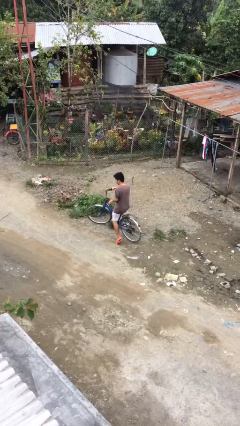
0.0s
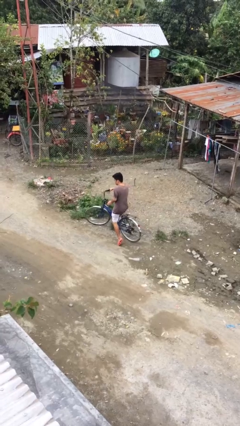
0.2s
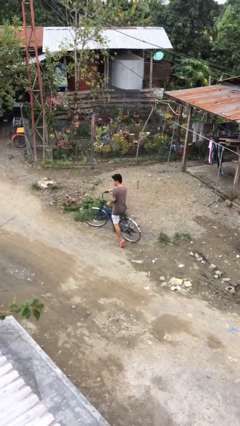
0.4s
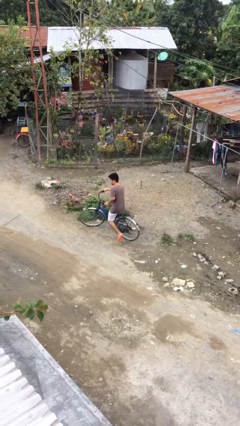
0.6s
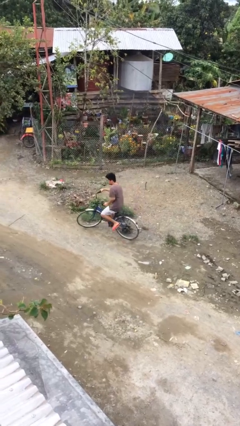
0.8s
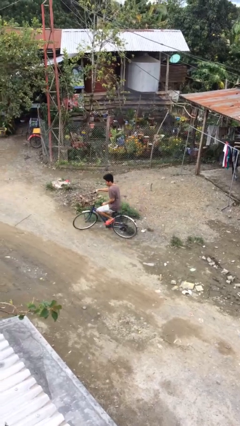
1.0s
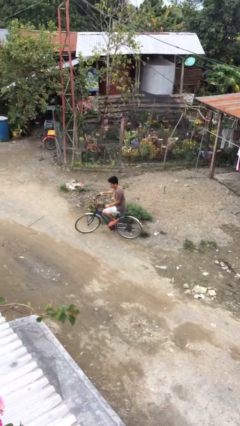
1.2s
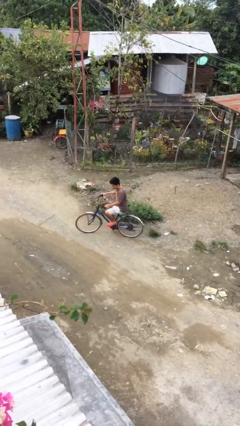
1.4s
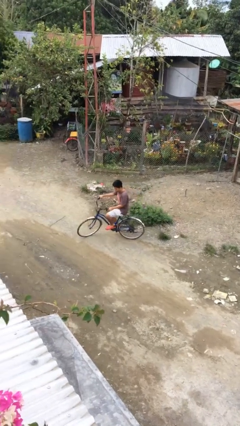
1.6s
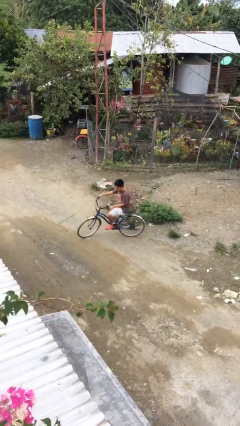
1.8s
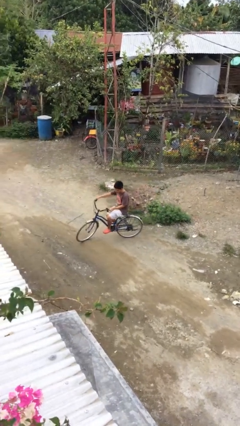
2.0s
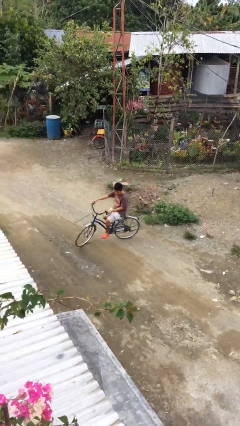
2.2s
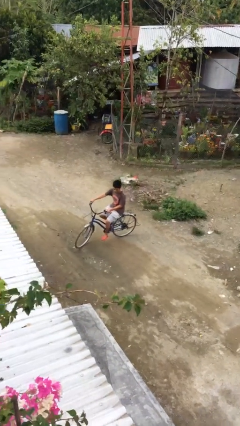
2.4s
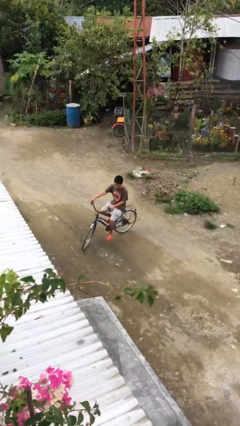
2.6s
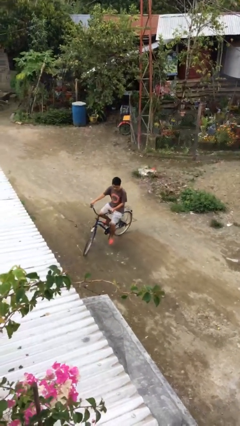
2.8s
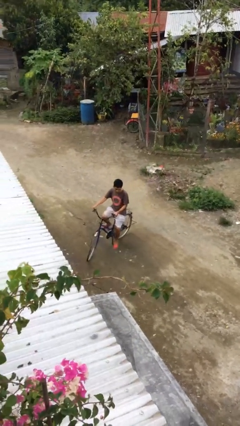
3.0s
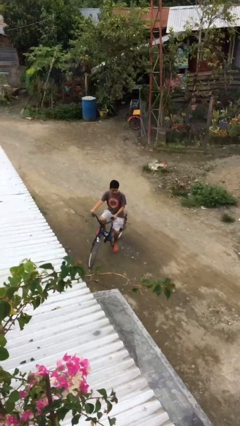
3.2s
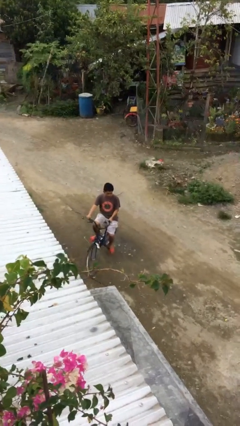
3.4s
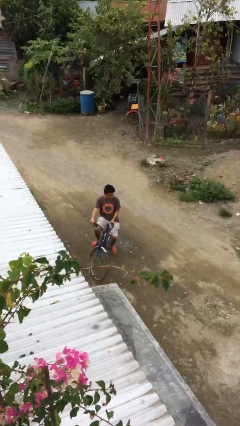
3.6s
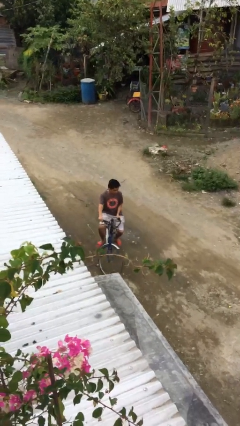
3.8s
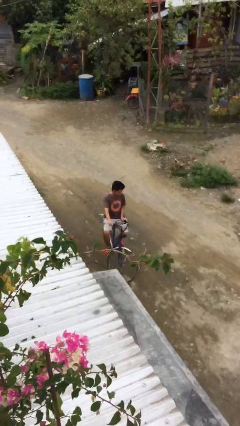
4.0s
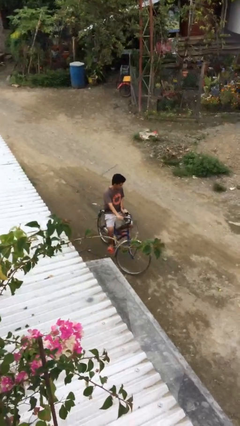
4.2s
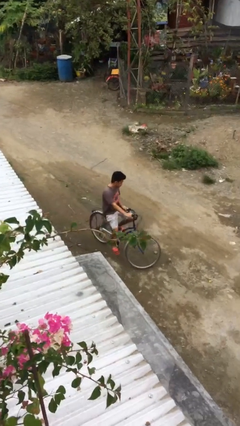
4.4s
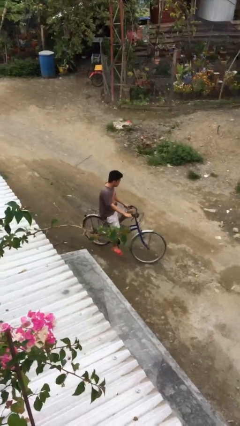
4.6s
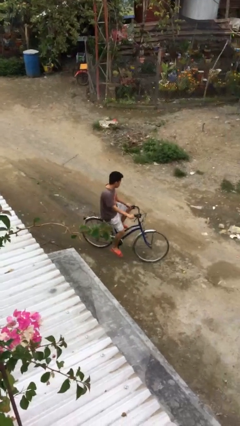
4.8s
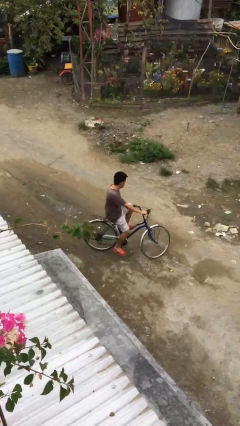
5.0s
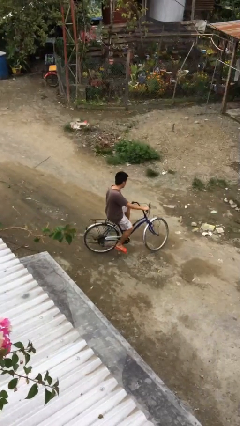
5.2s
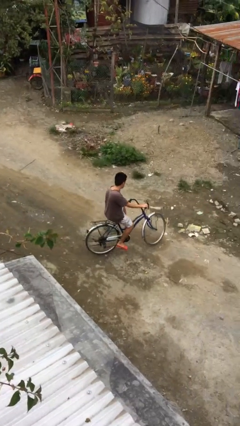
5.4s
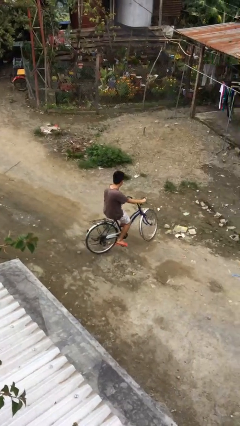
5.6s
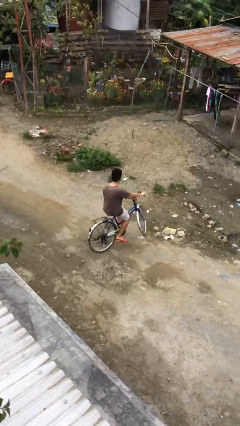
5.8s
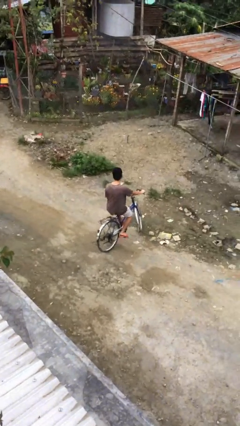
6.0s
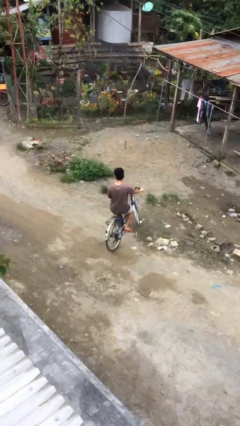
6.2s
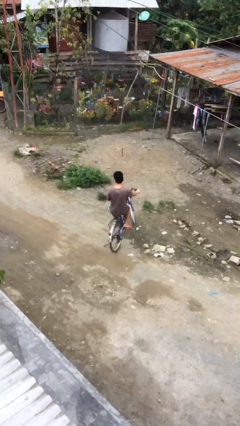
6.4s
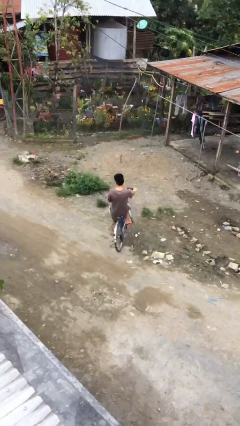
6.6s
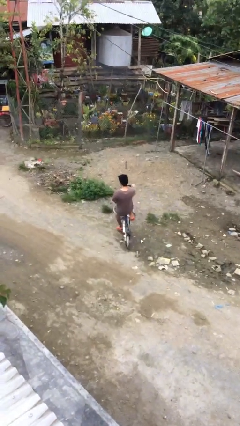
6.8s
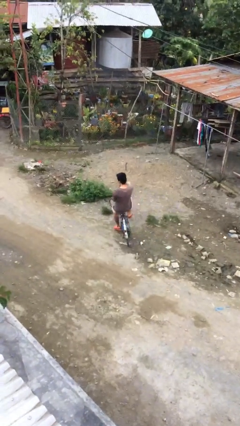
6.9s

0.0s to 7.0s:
person rides bicycle

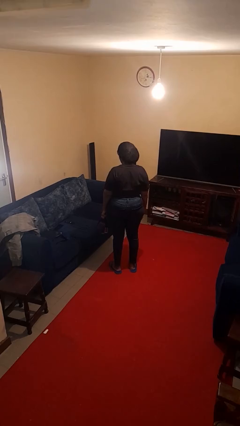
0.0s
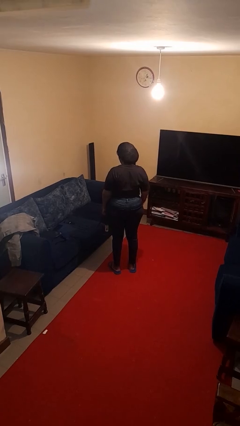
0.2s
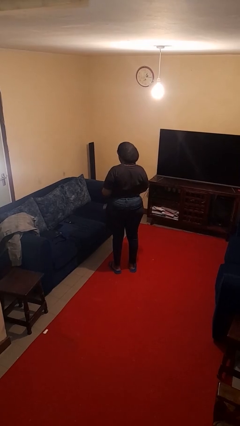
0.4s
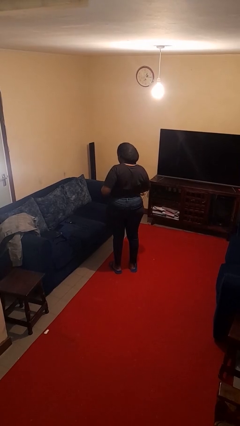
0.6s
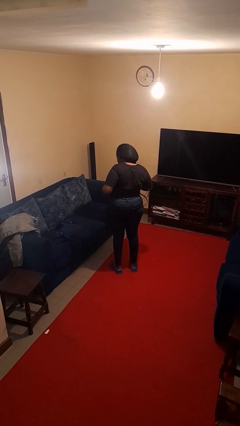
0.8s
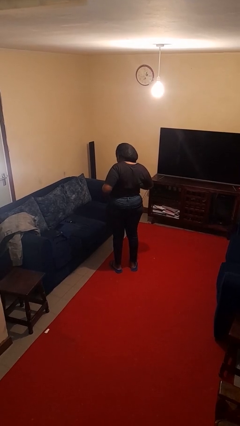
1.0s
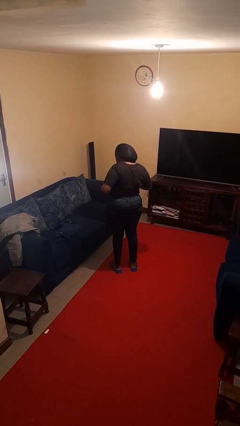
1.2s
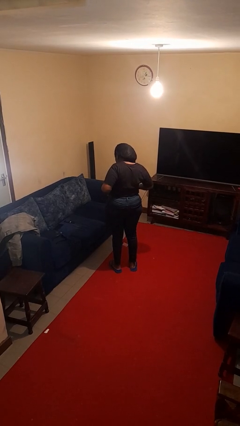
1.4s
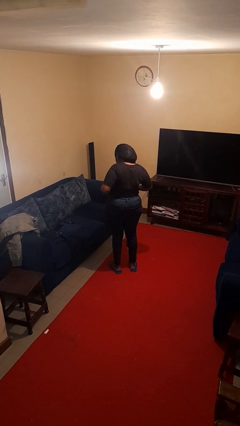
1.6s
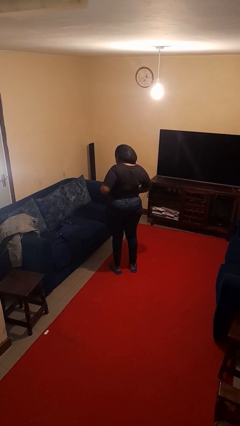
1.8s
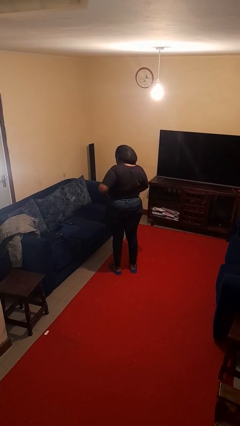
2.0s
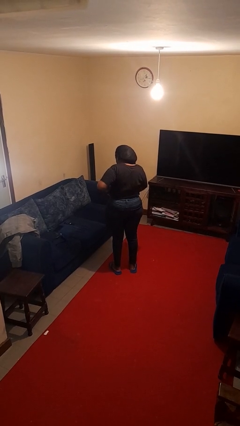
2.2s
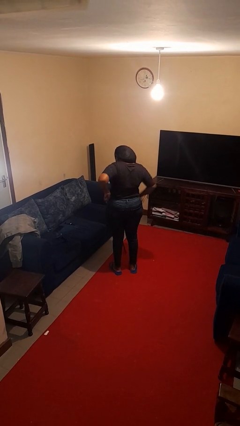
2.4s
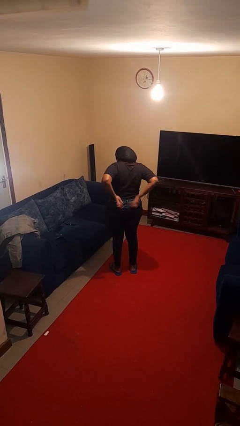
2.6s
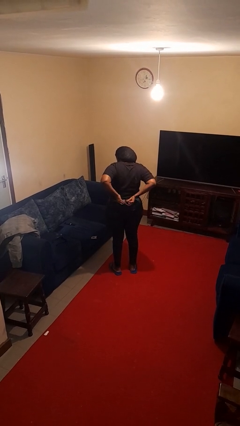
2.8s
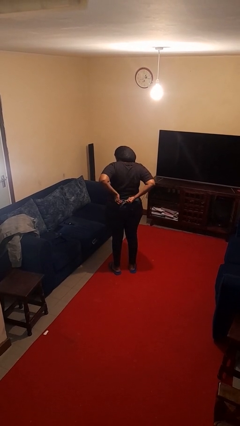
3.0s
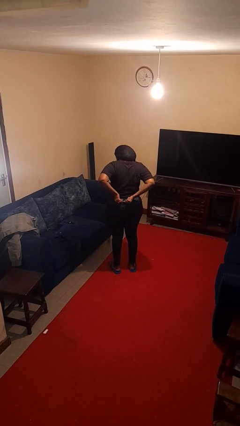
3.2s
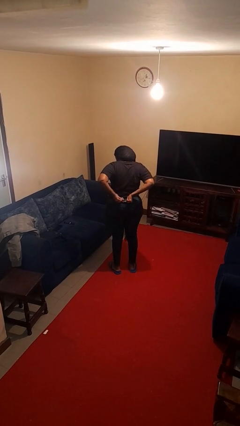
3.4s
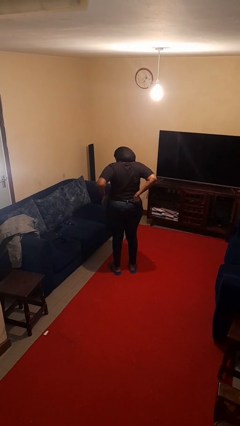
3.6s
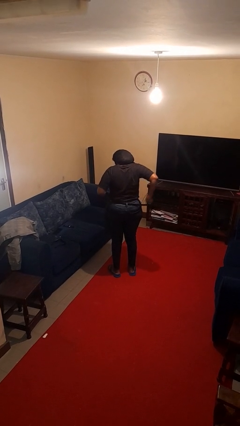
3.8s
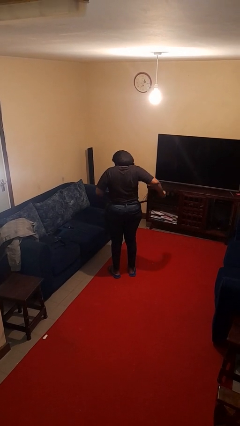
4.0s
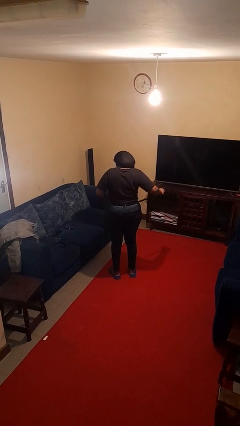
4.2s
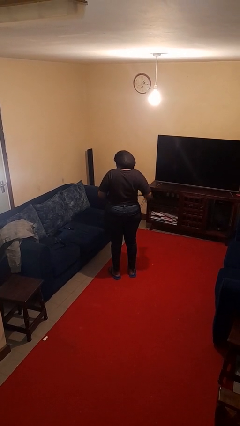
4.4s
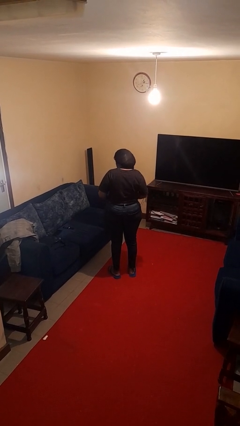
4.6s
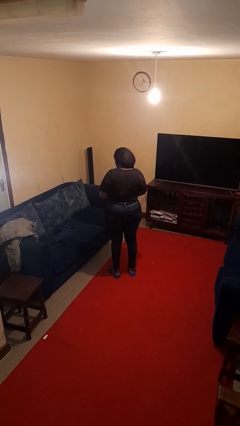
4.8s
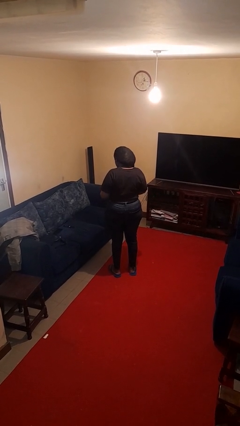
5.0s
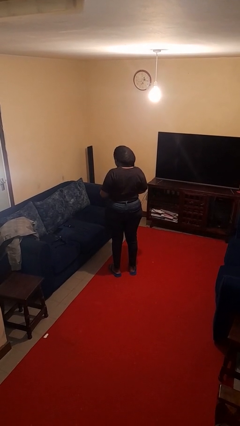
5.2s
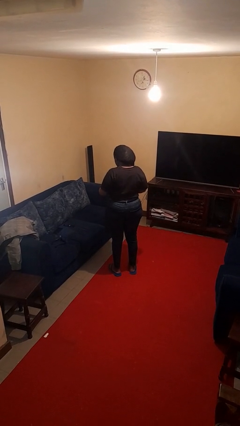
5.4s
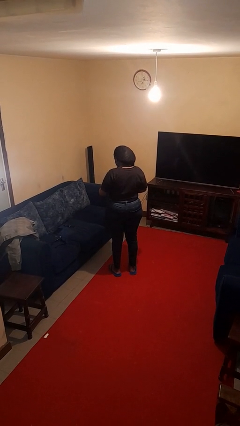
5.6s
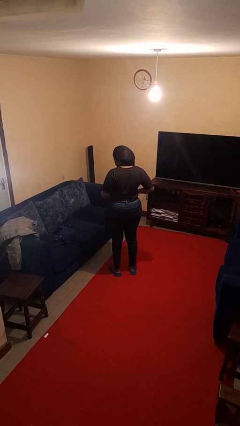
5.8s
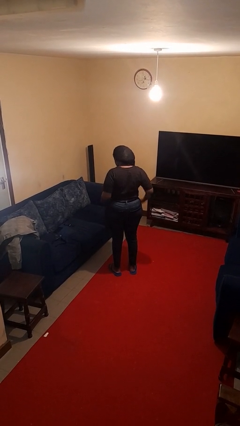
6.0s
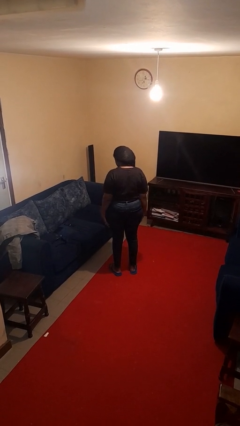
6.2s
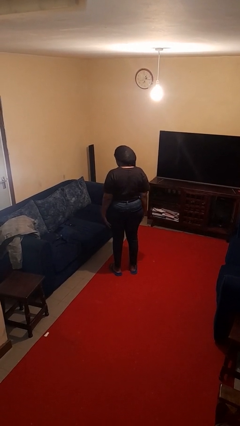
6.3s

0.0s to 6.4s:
person puts on belt

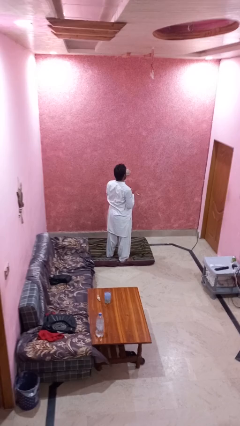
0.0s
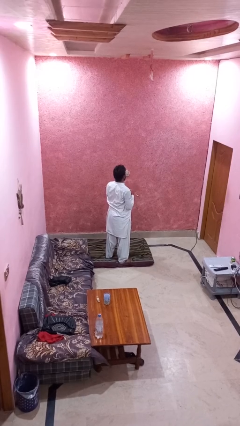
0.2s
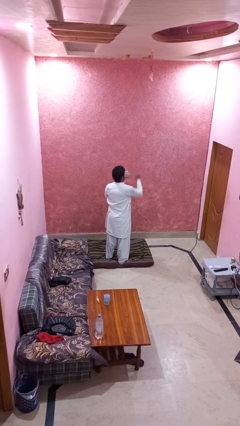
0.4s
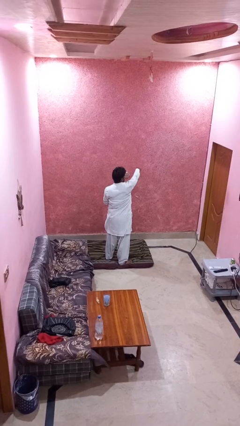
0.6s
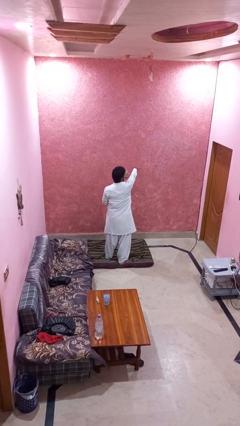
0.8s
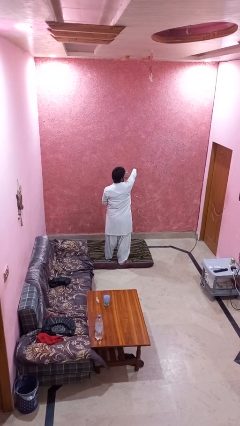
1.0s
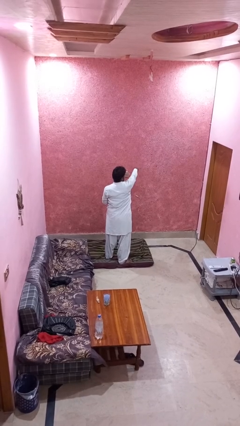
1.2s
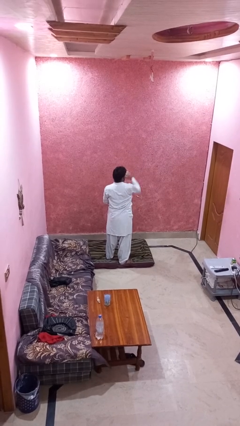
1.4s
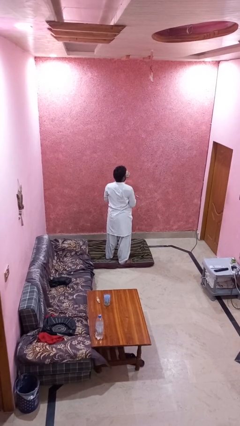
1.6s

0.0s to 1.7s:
person punches

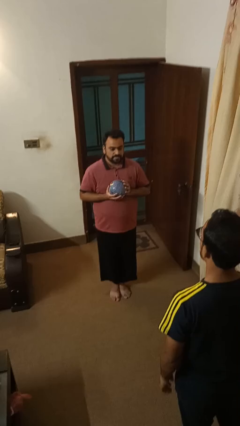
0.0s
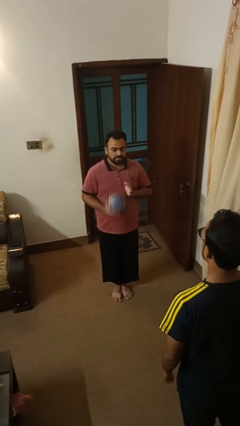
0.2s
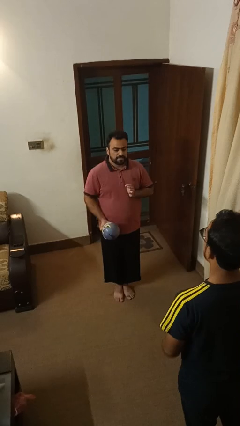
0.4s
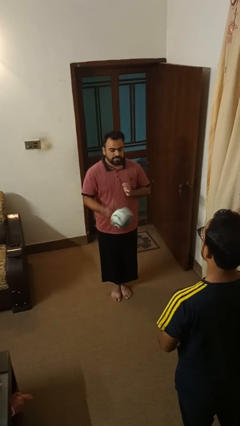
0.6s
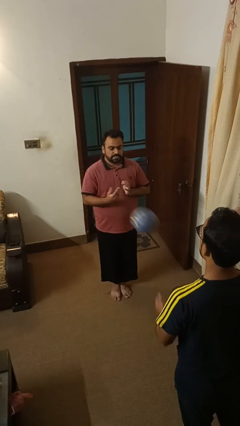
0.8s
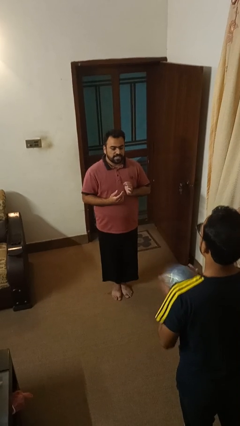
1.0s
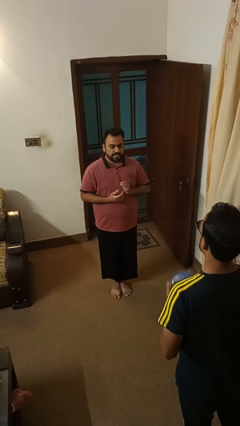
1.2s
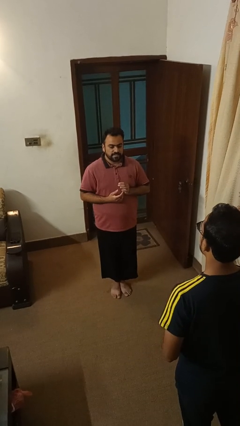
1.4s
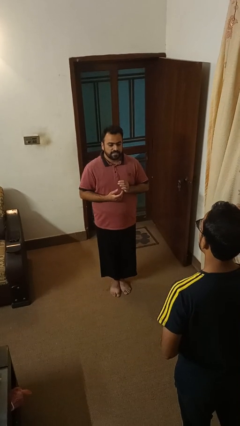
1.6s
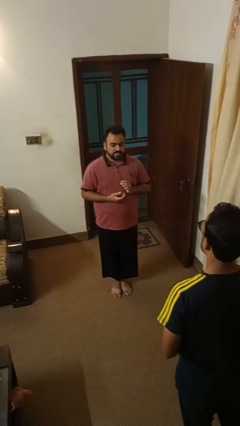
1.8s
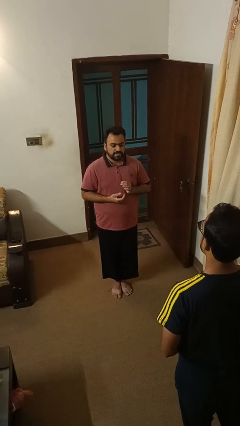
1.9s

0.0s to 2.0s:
person throws object to person

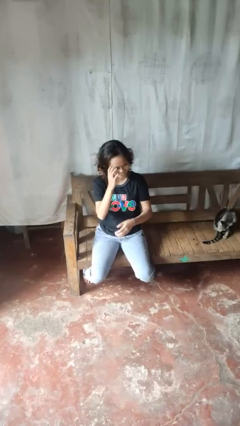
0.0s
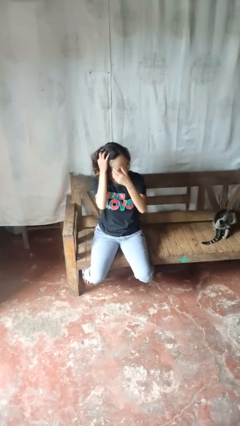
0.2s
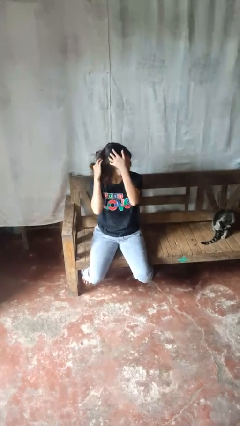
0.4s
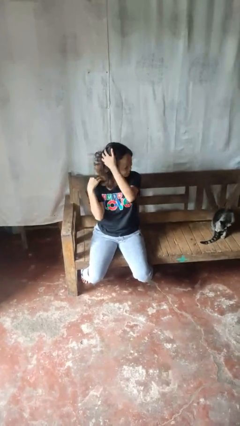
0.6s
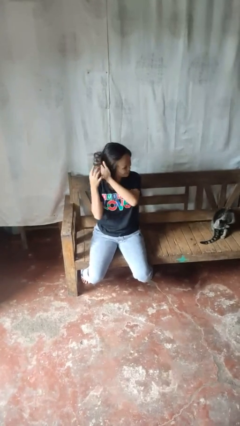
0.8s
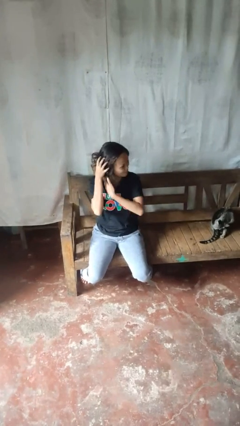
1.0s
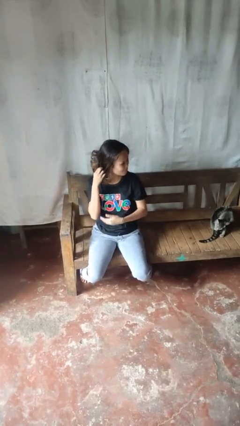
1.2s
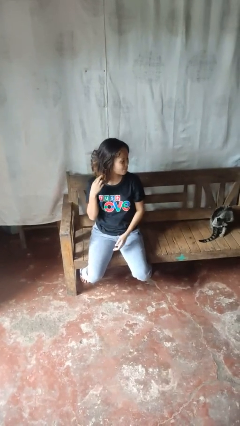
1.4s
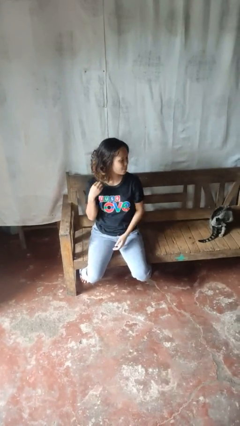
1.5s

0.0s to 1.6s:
person strokes hair
